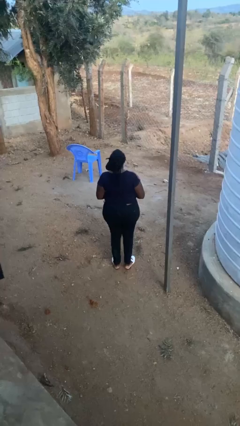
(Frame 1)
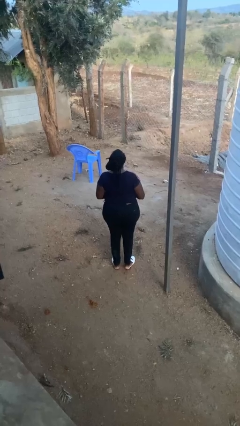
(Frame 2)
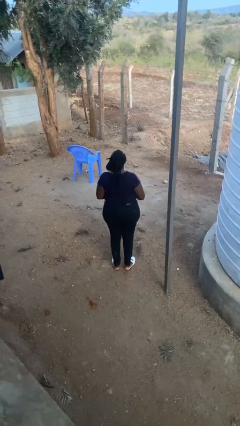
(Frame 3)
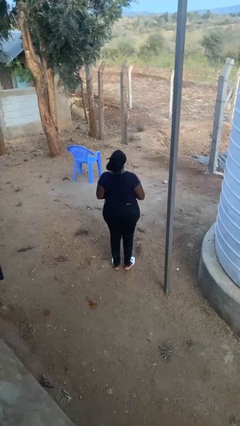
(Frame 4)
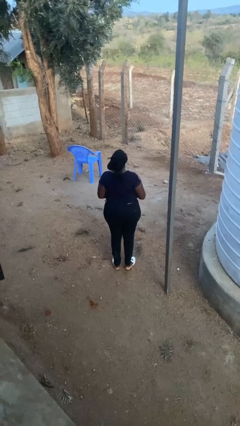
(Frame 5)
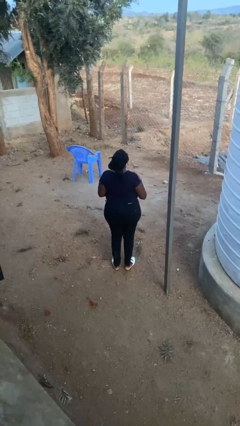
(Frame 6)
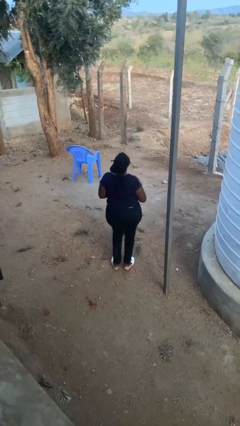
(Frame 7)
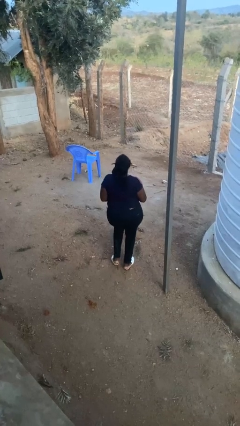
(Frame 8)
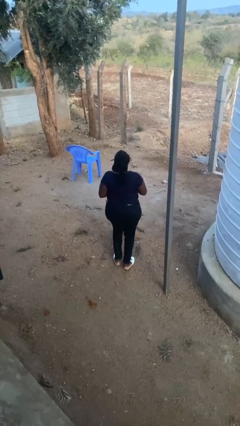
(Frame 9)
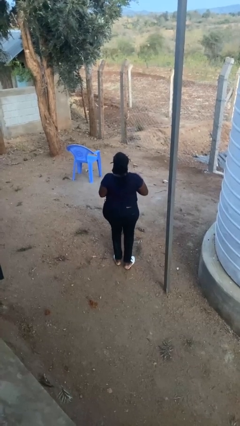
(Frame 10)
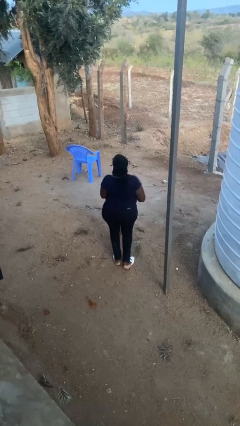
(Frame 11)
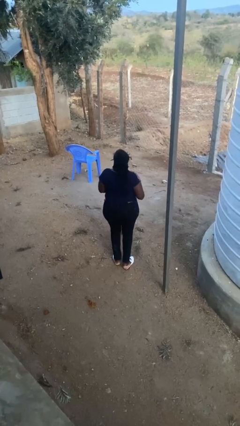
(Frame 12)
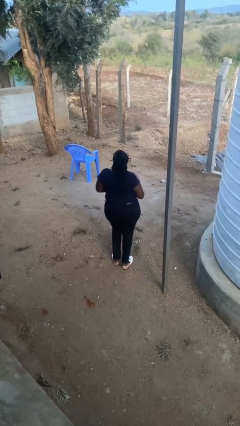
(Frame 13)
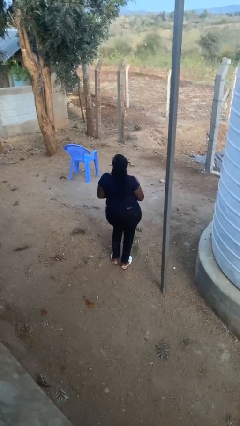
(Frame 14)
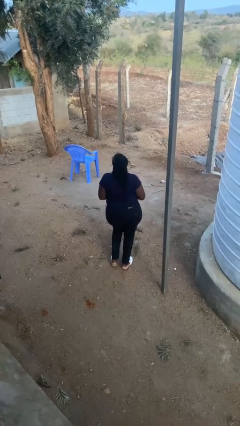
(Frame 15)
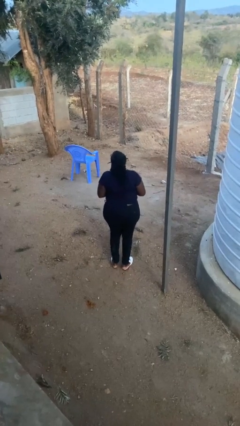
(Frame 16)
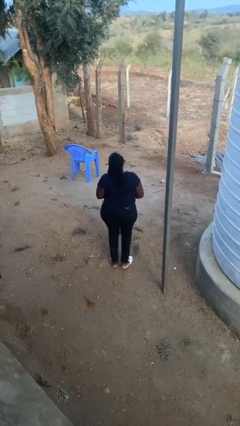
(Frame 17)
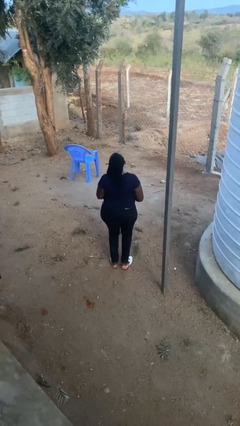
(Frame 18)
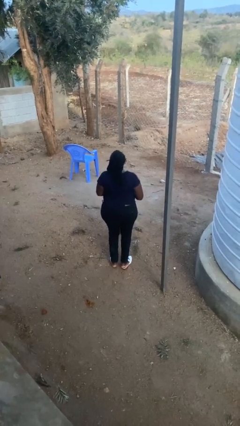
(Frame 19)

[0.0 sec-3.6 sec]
person dances in place

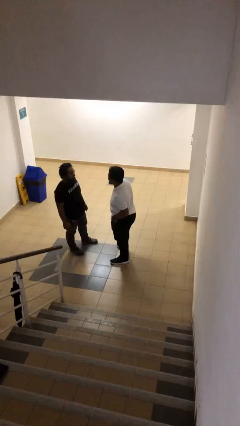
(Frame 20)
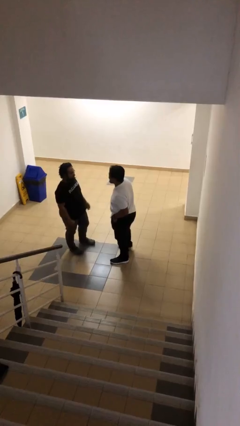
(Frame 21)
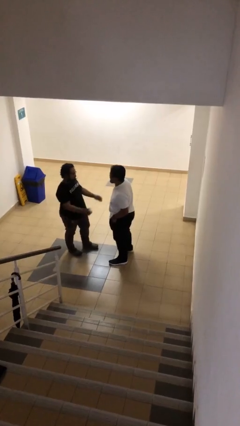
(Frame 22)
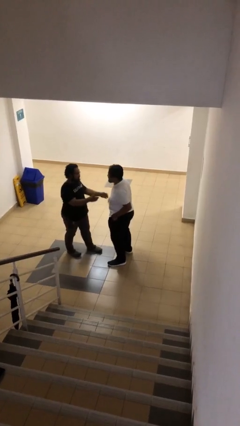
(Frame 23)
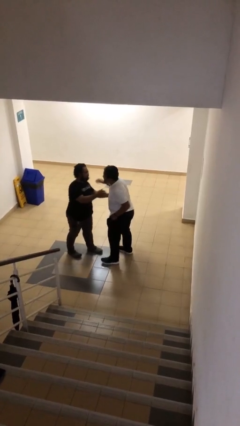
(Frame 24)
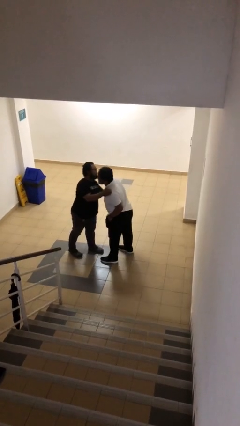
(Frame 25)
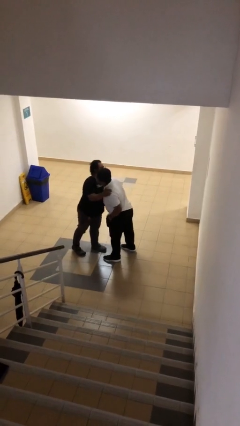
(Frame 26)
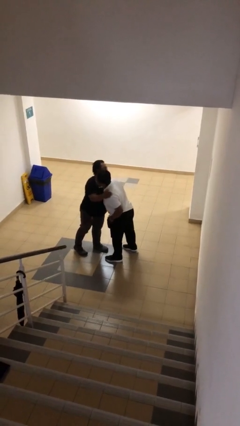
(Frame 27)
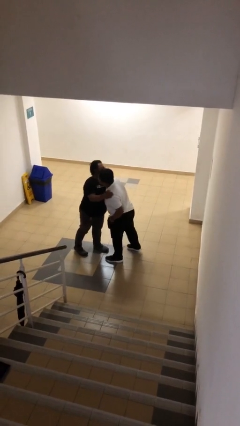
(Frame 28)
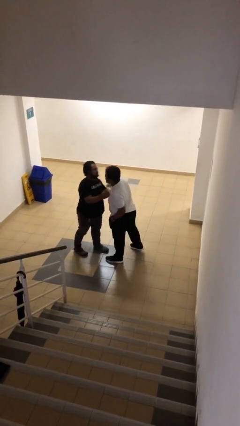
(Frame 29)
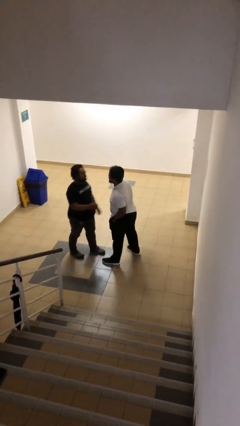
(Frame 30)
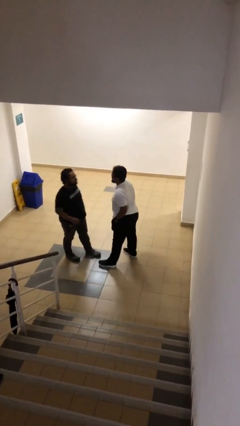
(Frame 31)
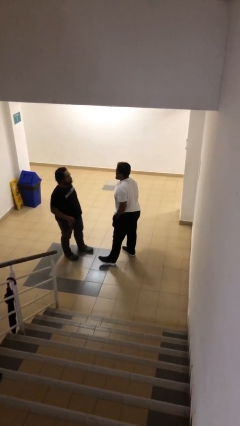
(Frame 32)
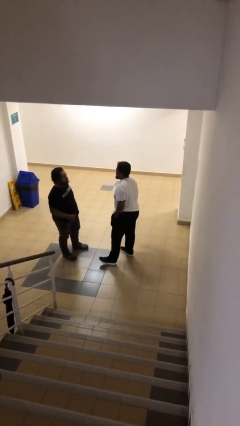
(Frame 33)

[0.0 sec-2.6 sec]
person embraces person

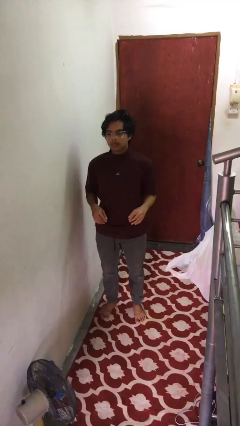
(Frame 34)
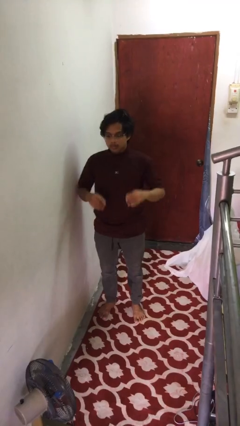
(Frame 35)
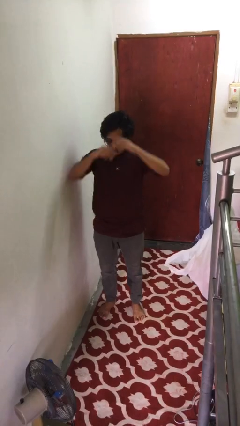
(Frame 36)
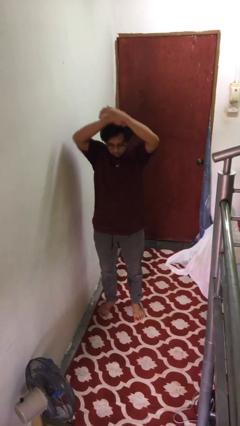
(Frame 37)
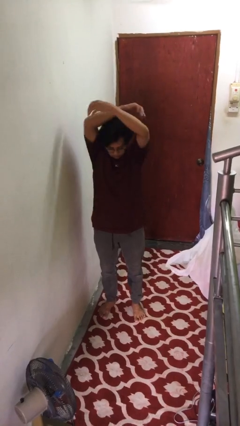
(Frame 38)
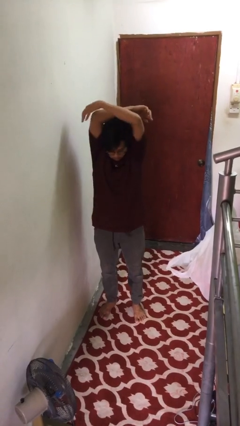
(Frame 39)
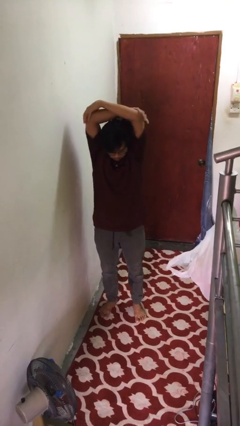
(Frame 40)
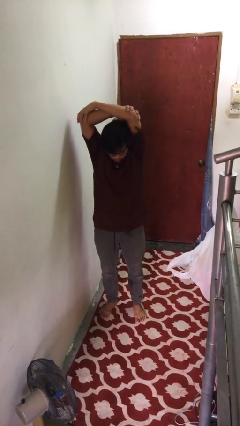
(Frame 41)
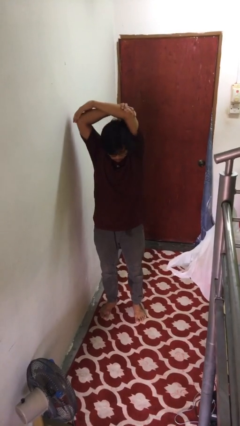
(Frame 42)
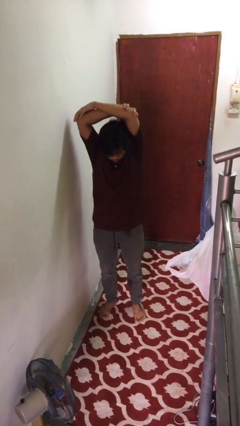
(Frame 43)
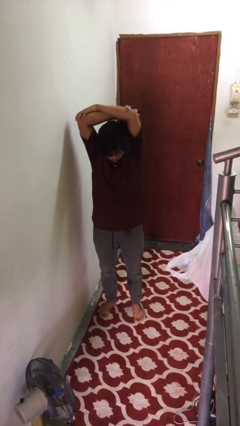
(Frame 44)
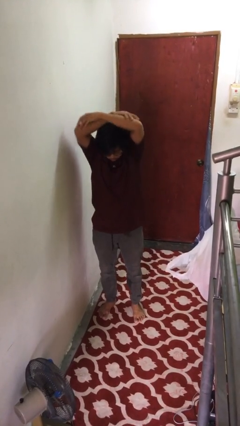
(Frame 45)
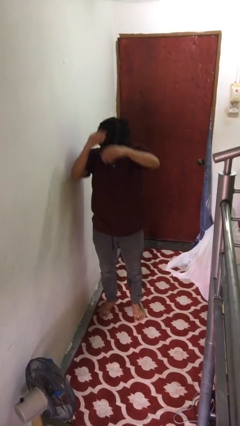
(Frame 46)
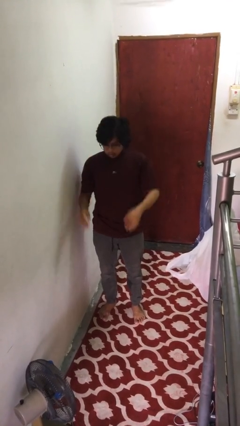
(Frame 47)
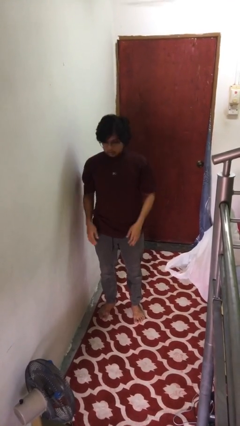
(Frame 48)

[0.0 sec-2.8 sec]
person stretches arms over head

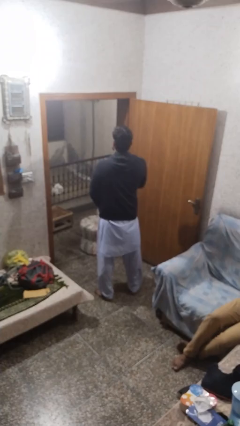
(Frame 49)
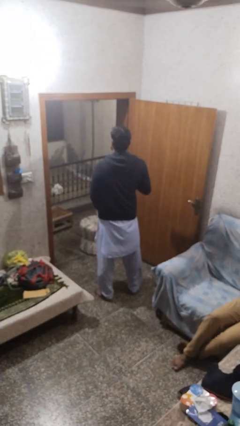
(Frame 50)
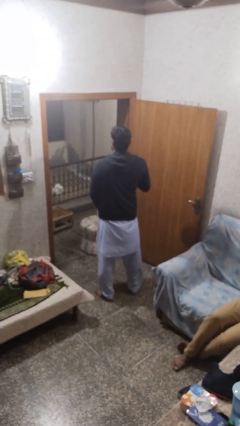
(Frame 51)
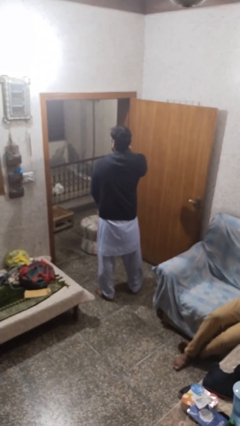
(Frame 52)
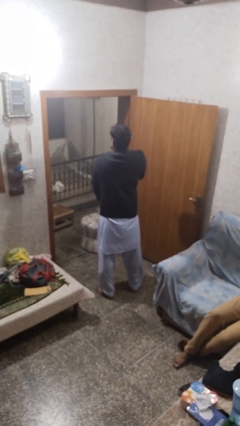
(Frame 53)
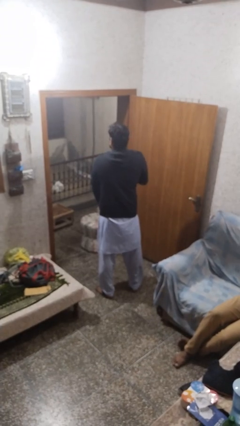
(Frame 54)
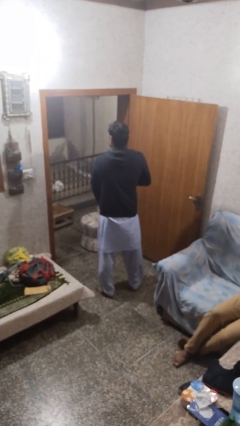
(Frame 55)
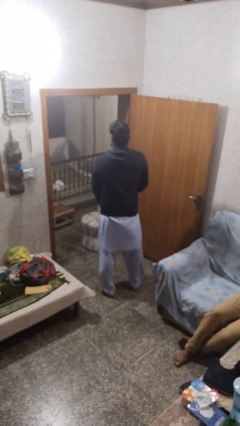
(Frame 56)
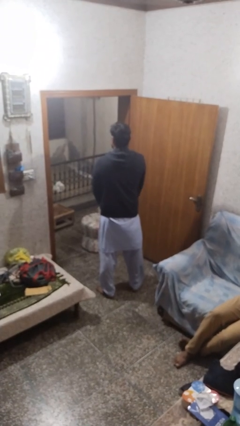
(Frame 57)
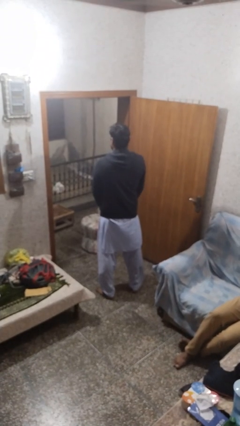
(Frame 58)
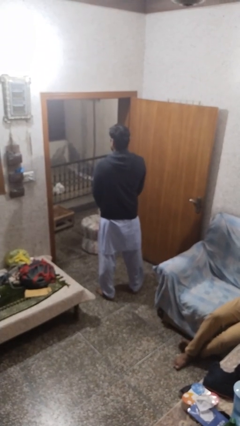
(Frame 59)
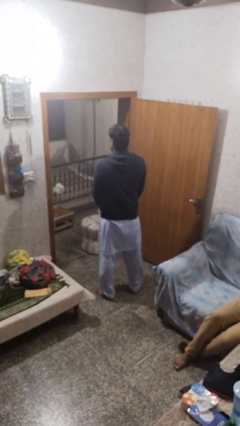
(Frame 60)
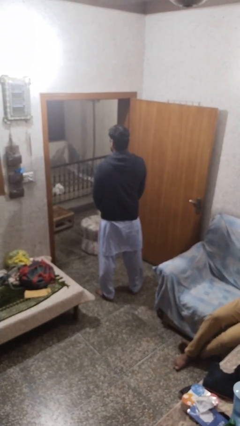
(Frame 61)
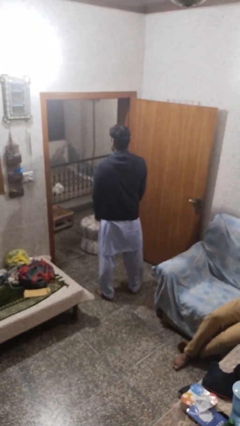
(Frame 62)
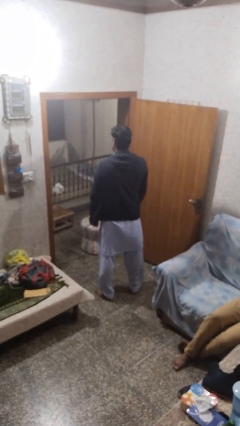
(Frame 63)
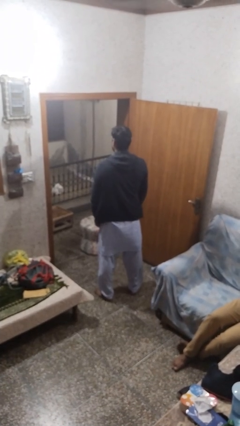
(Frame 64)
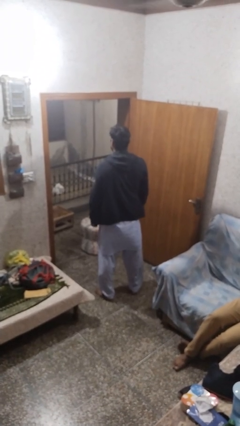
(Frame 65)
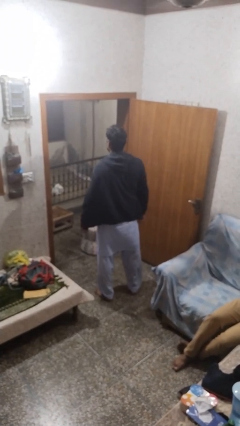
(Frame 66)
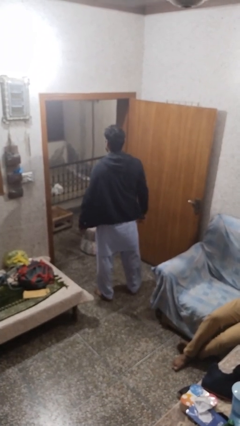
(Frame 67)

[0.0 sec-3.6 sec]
person unzips jacket

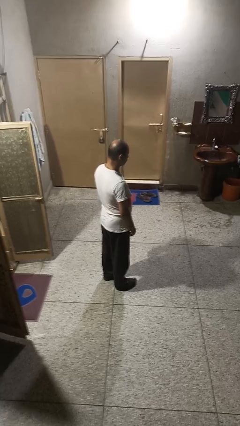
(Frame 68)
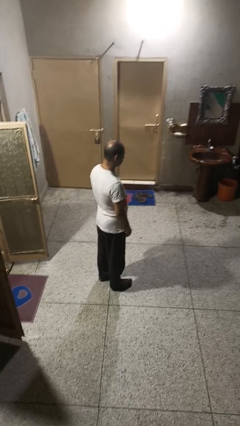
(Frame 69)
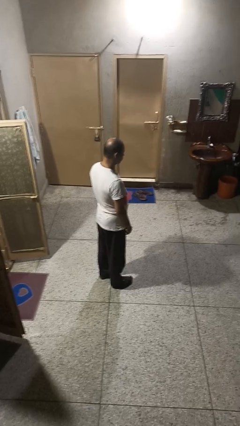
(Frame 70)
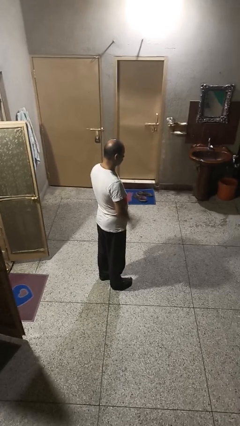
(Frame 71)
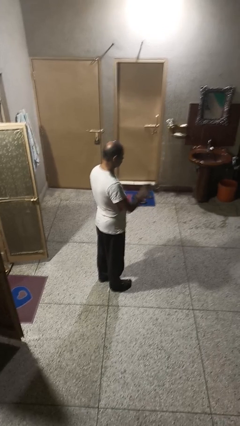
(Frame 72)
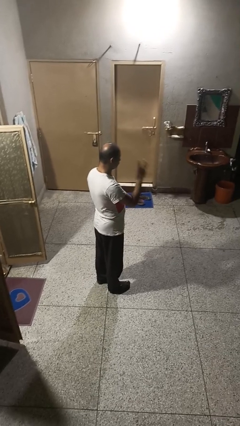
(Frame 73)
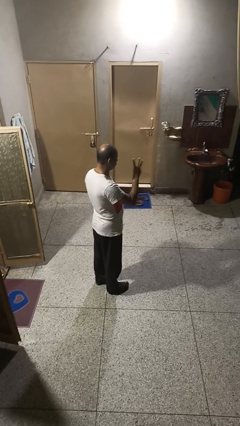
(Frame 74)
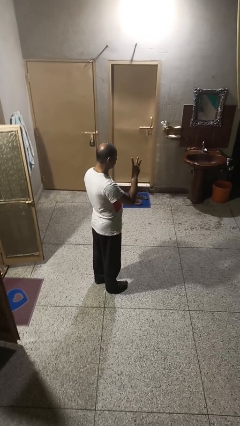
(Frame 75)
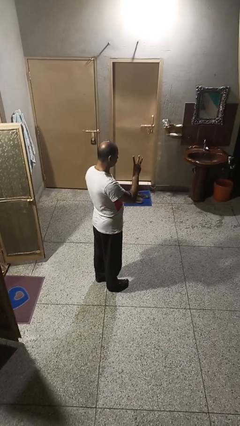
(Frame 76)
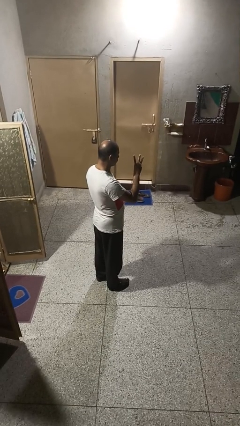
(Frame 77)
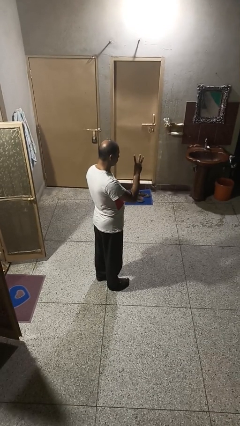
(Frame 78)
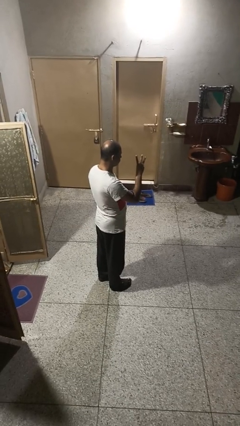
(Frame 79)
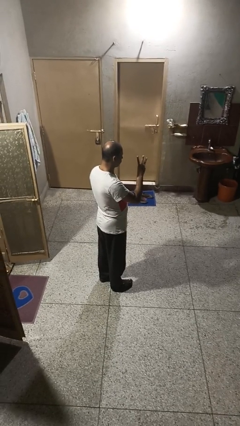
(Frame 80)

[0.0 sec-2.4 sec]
person gestures number three

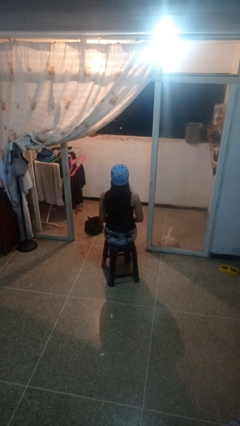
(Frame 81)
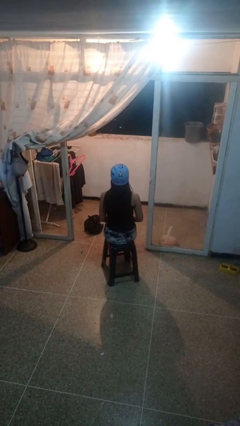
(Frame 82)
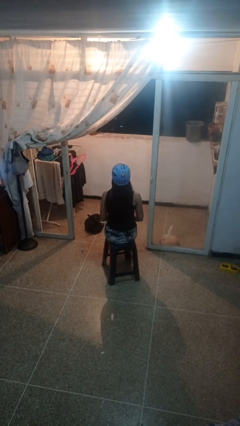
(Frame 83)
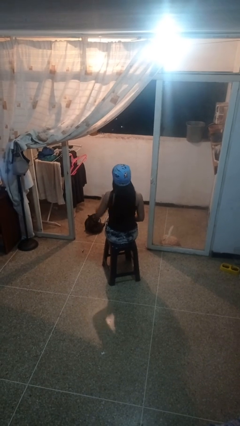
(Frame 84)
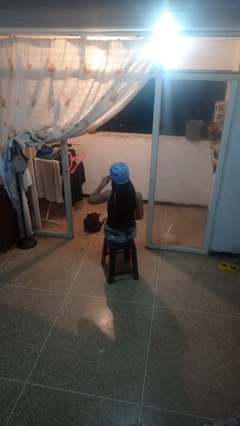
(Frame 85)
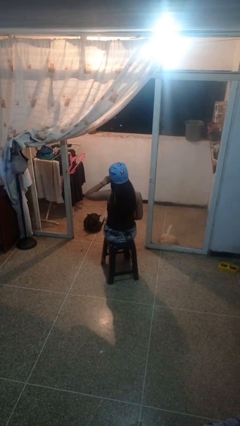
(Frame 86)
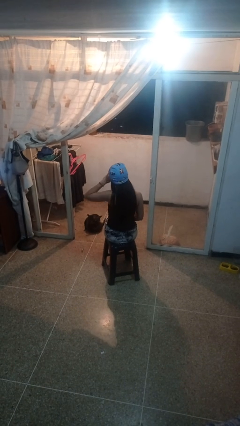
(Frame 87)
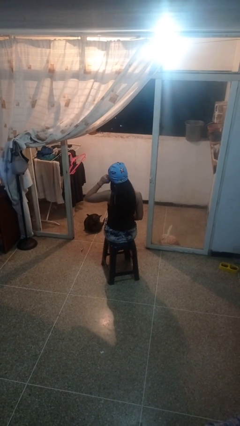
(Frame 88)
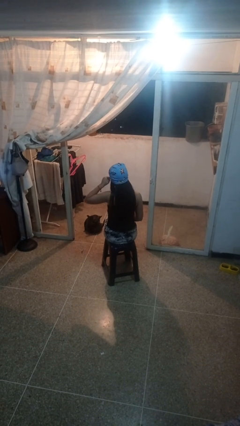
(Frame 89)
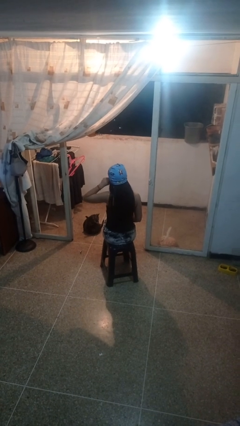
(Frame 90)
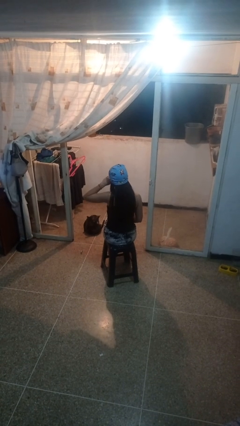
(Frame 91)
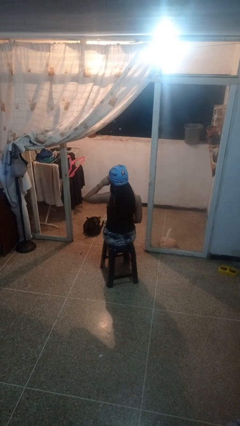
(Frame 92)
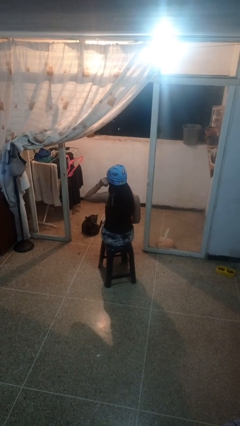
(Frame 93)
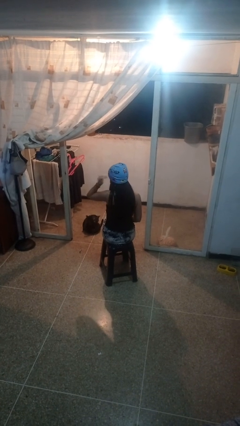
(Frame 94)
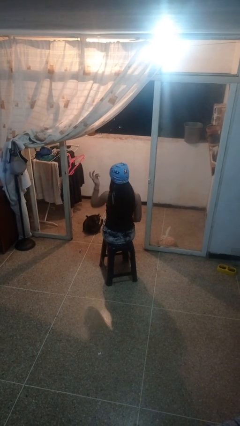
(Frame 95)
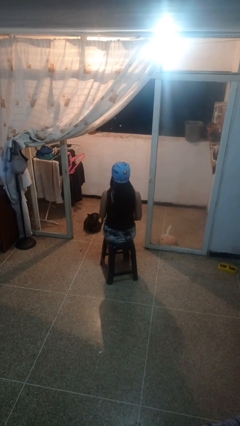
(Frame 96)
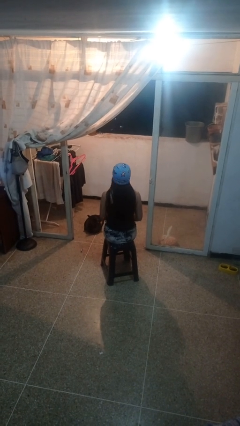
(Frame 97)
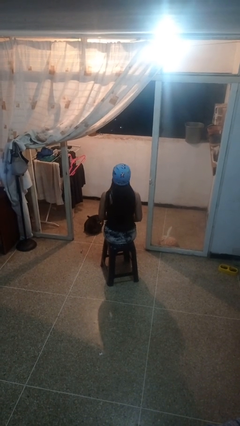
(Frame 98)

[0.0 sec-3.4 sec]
person rubs eyes
